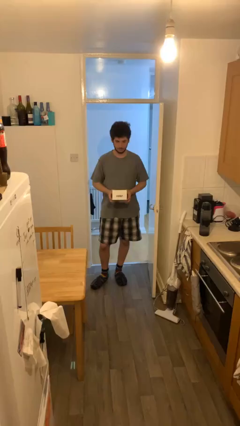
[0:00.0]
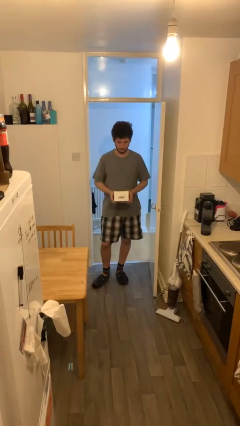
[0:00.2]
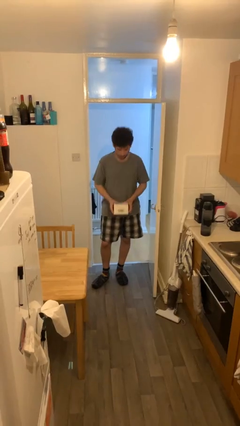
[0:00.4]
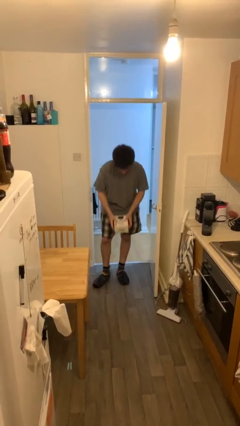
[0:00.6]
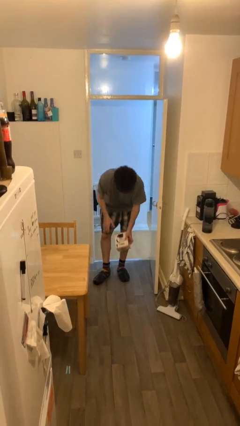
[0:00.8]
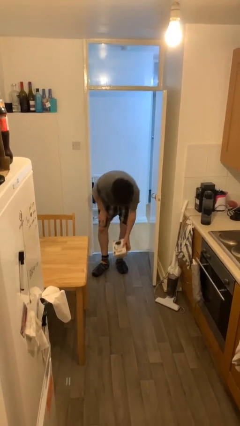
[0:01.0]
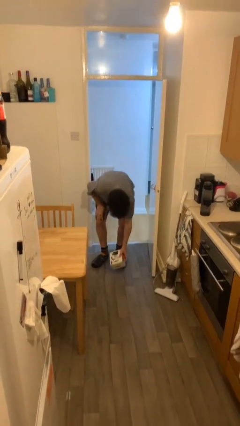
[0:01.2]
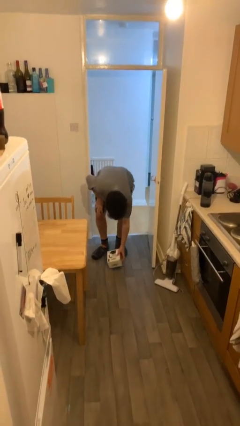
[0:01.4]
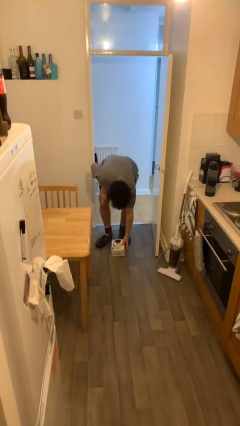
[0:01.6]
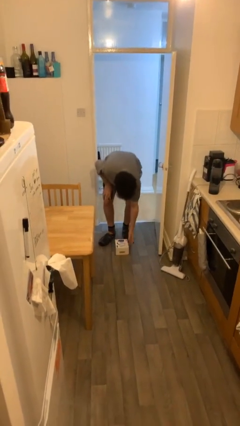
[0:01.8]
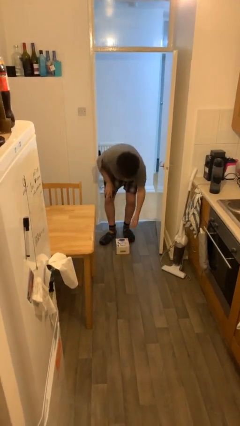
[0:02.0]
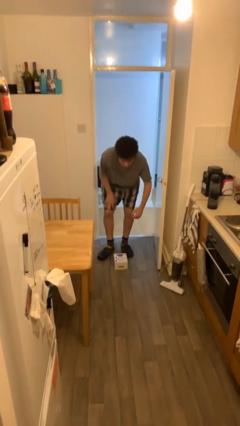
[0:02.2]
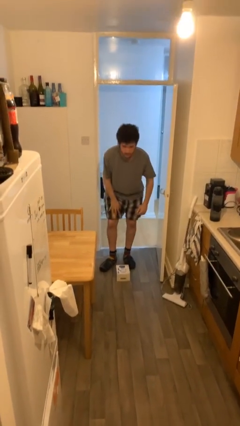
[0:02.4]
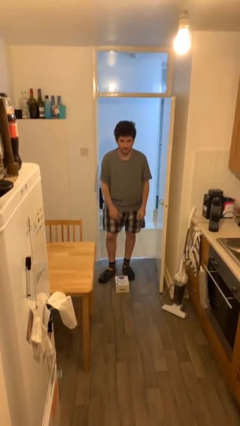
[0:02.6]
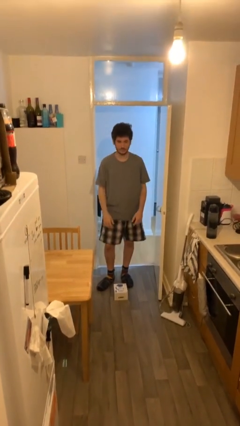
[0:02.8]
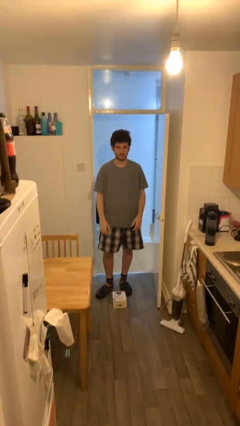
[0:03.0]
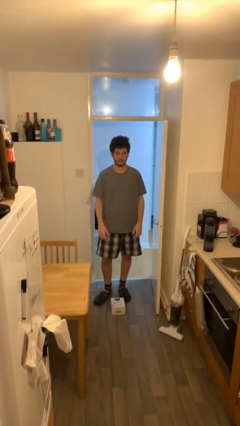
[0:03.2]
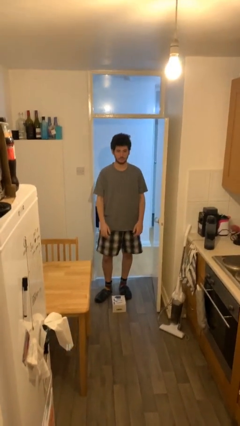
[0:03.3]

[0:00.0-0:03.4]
person puts down object on floor

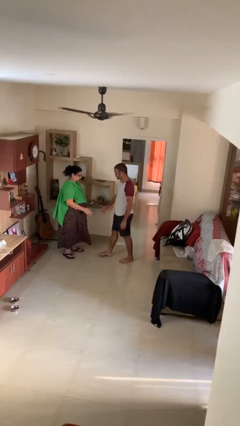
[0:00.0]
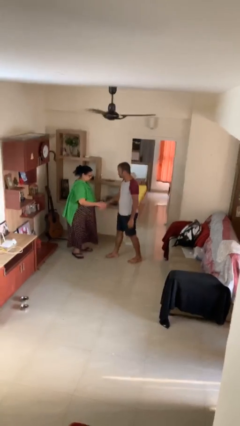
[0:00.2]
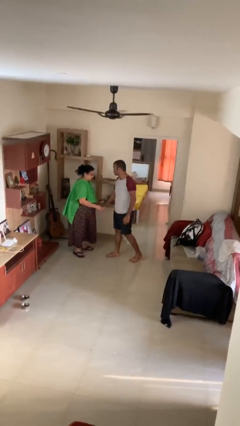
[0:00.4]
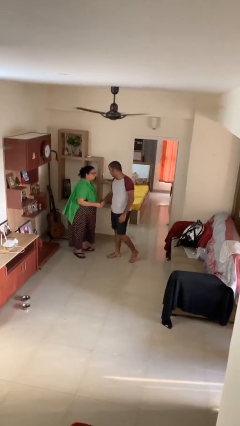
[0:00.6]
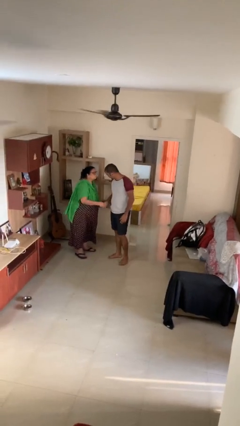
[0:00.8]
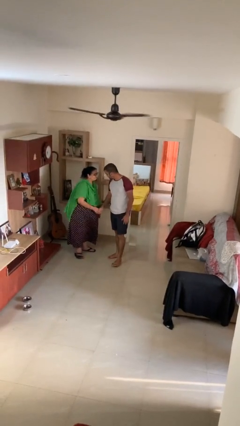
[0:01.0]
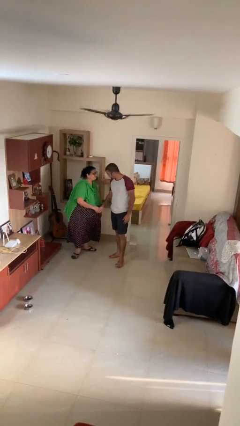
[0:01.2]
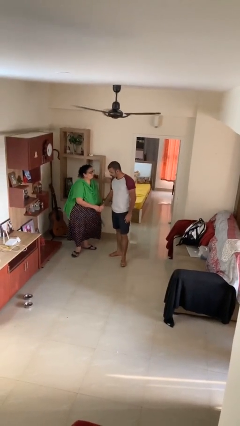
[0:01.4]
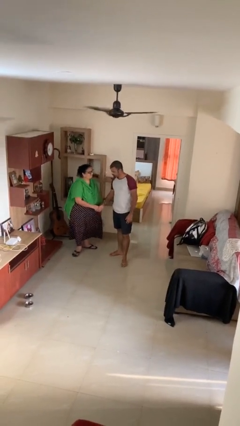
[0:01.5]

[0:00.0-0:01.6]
person shakes hand

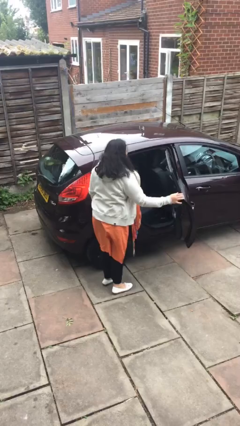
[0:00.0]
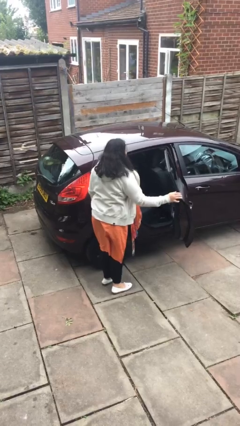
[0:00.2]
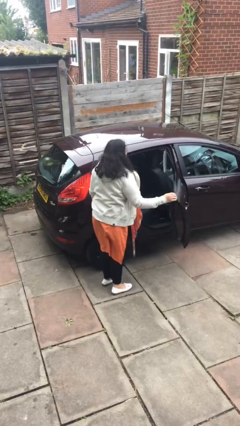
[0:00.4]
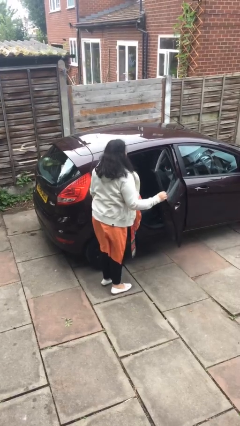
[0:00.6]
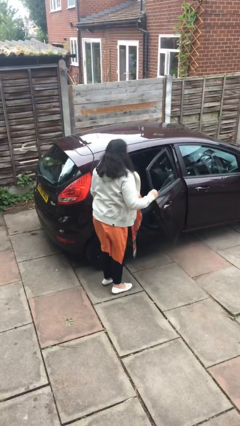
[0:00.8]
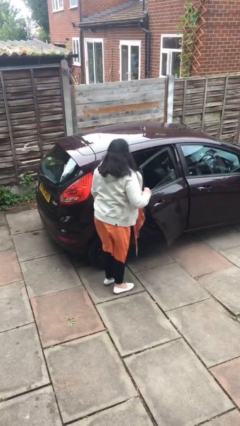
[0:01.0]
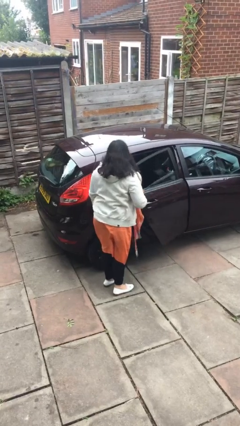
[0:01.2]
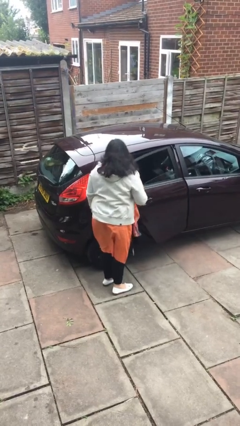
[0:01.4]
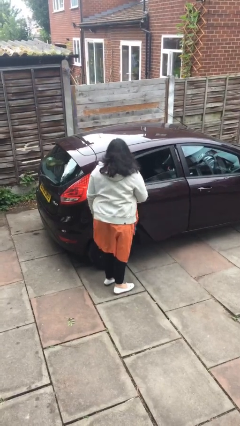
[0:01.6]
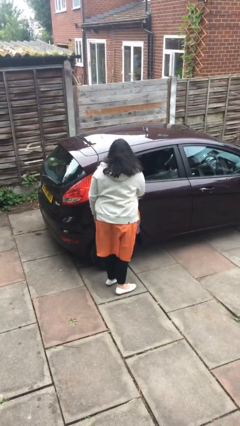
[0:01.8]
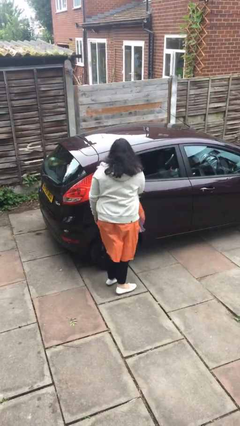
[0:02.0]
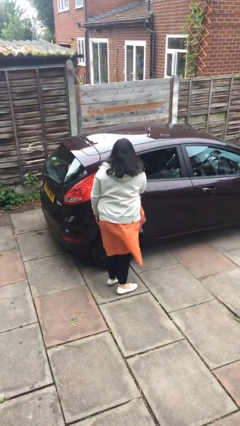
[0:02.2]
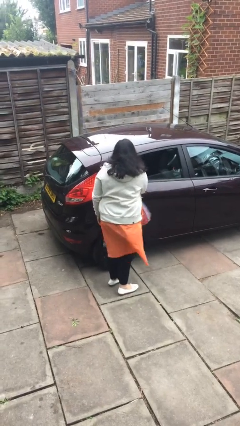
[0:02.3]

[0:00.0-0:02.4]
person closes car door

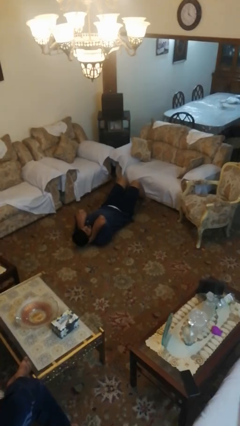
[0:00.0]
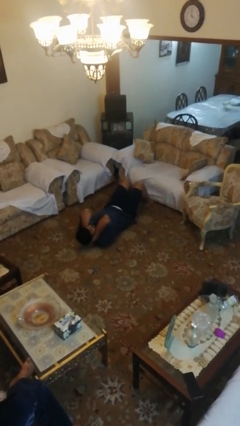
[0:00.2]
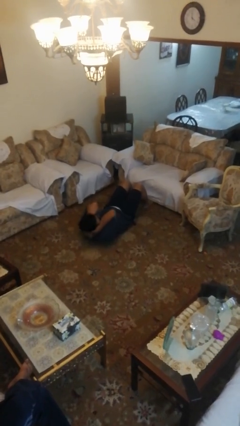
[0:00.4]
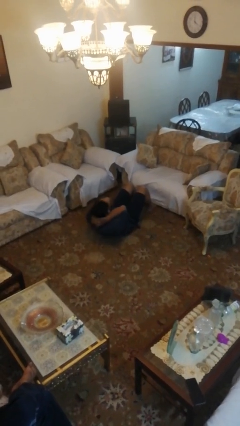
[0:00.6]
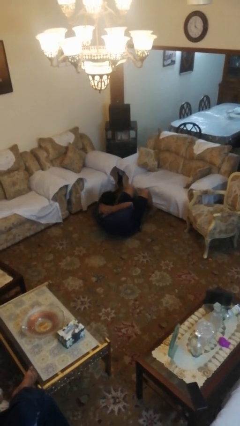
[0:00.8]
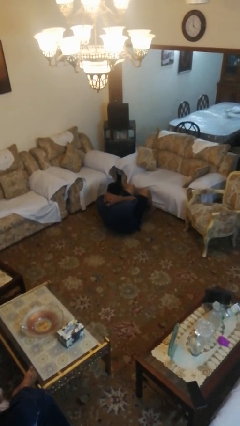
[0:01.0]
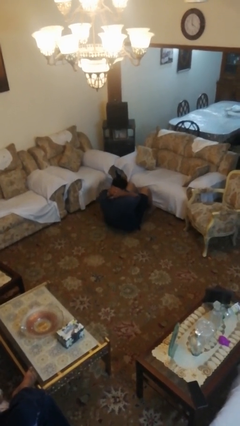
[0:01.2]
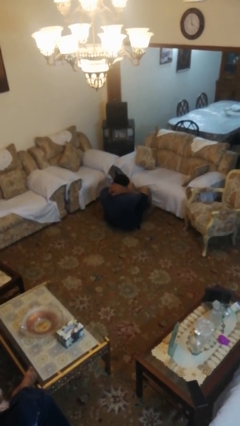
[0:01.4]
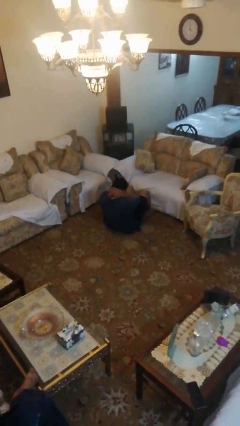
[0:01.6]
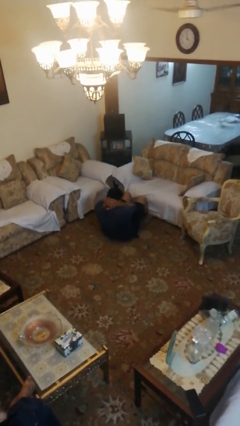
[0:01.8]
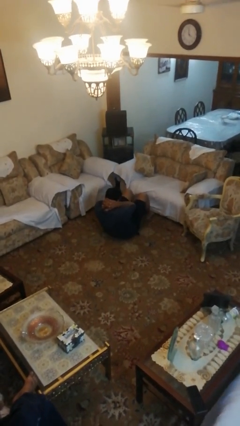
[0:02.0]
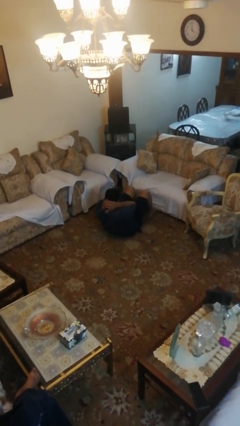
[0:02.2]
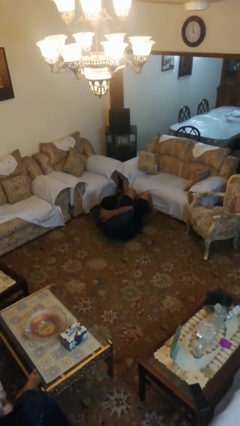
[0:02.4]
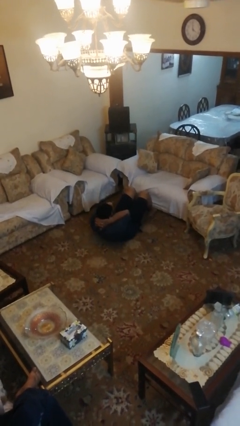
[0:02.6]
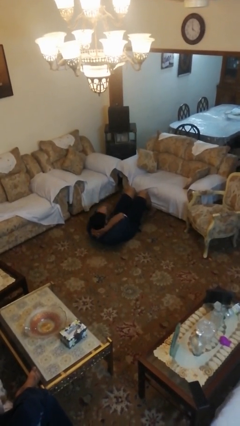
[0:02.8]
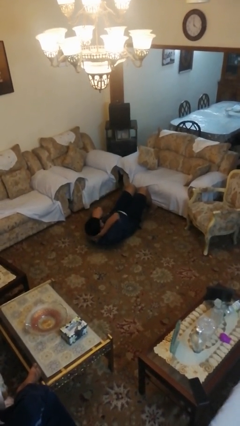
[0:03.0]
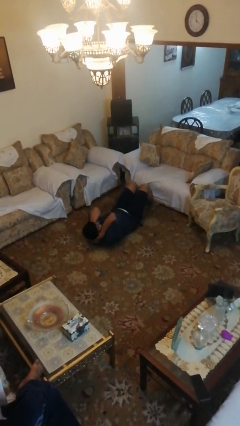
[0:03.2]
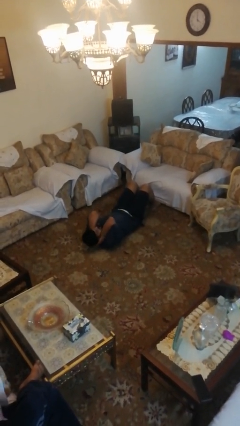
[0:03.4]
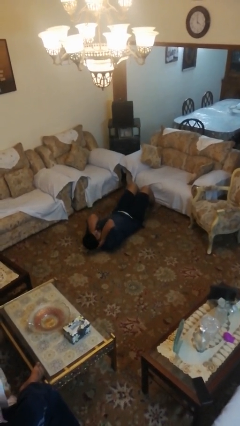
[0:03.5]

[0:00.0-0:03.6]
person exercises with situp

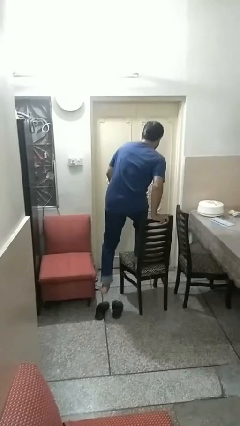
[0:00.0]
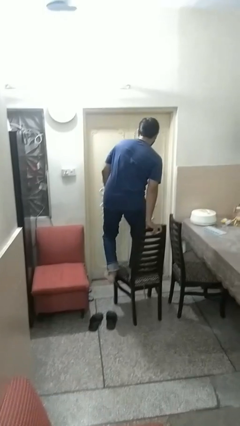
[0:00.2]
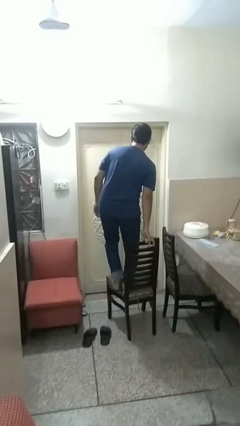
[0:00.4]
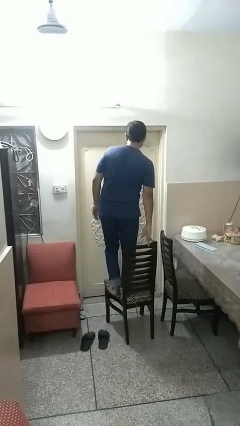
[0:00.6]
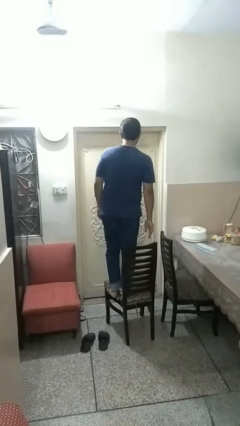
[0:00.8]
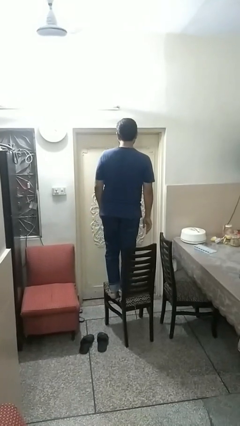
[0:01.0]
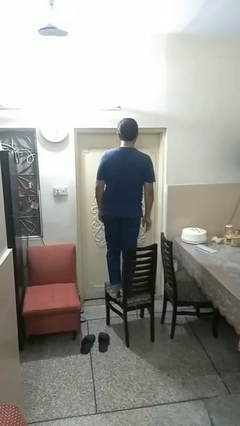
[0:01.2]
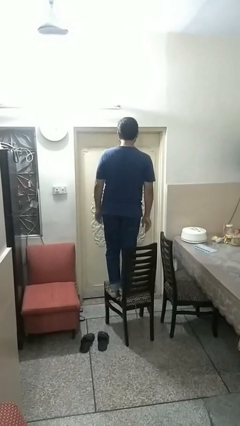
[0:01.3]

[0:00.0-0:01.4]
person climbs on chair

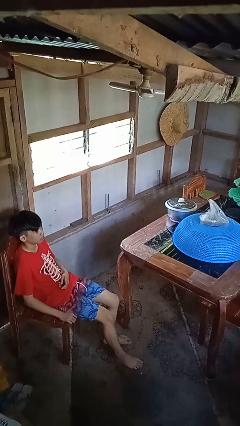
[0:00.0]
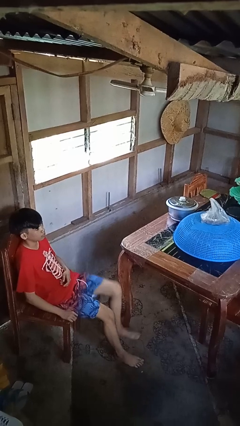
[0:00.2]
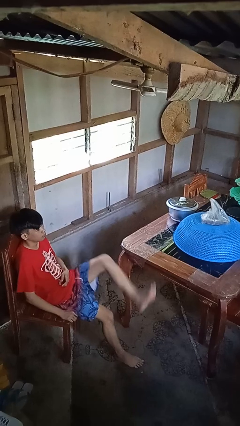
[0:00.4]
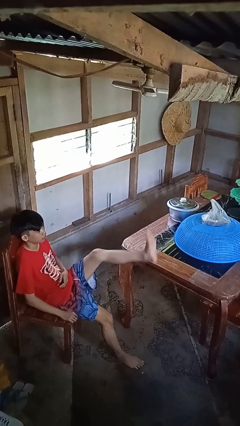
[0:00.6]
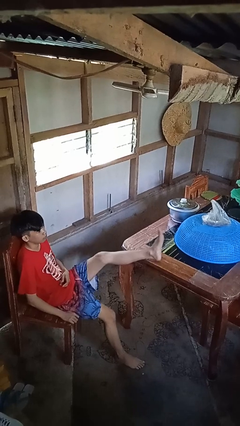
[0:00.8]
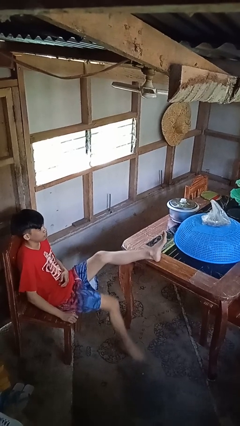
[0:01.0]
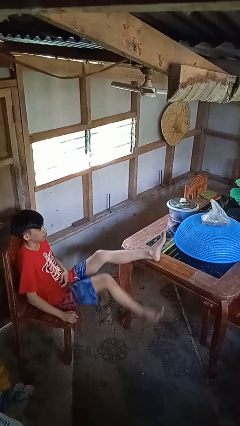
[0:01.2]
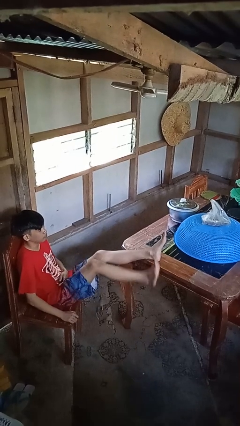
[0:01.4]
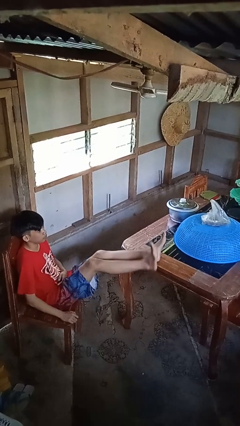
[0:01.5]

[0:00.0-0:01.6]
person puts feet up

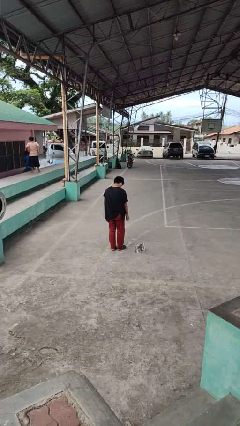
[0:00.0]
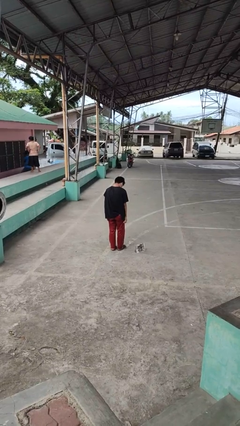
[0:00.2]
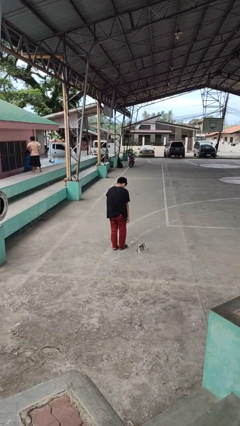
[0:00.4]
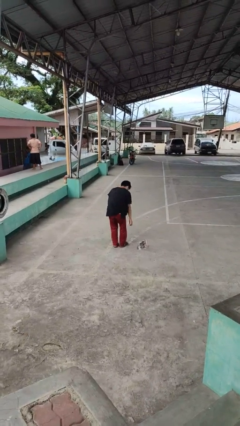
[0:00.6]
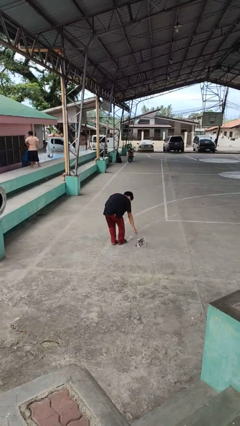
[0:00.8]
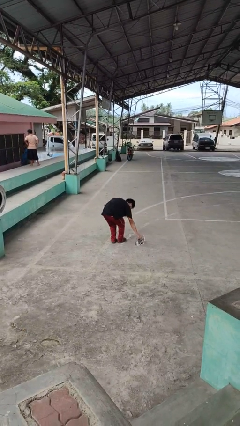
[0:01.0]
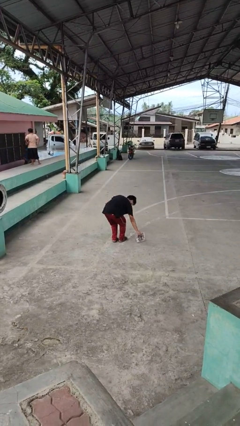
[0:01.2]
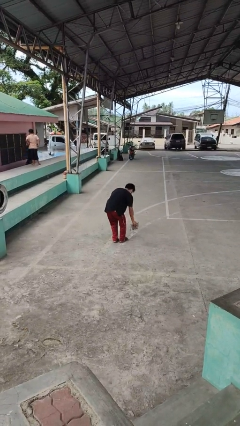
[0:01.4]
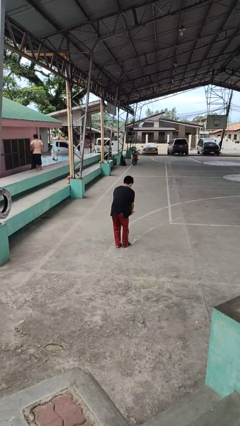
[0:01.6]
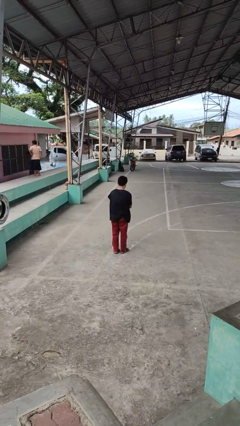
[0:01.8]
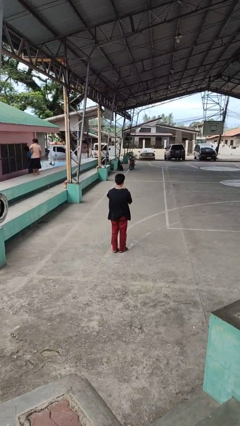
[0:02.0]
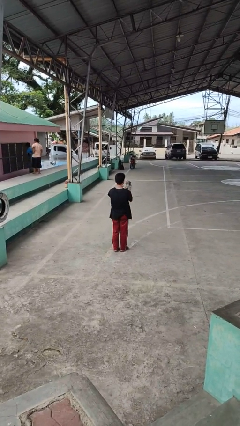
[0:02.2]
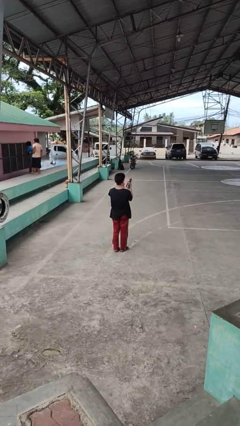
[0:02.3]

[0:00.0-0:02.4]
person picks up object from floor

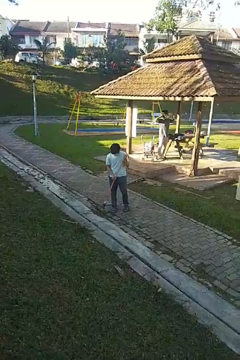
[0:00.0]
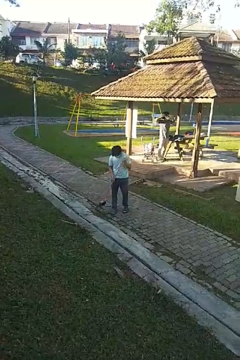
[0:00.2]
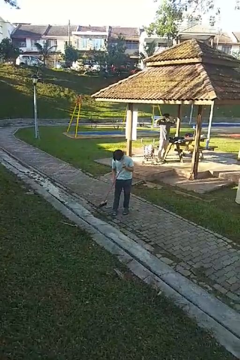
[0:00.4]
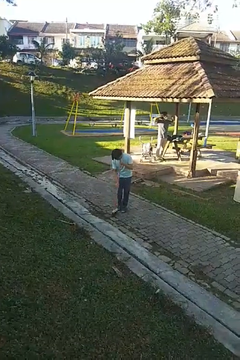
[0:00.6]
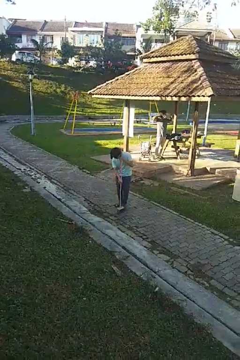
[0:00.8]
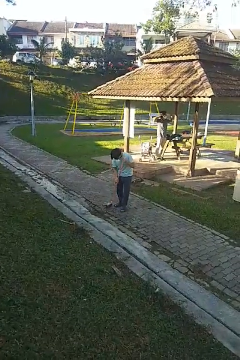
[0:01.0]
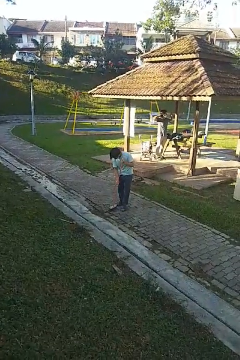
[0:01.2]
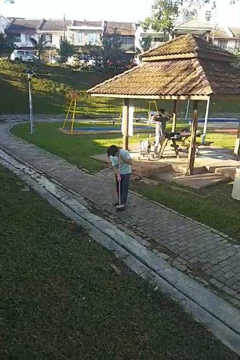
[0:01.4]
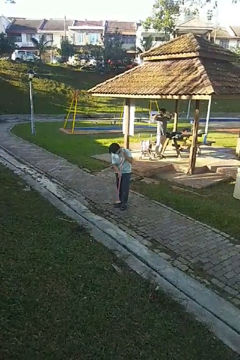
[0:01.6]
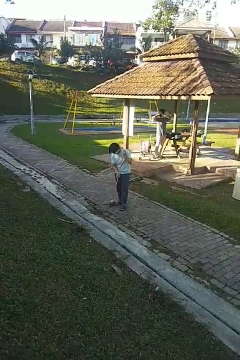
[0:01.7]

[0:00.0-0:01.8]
person sweeps floor
